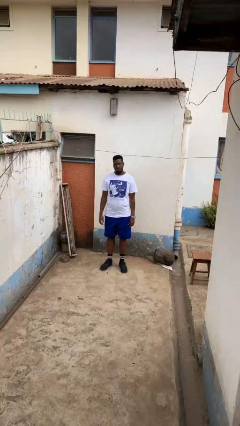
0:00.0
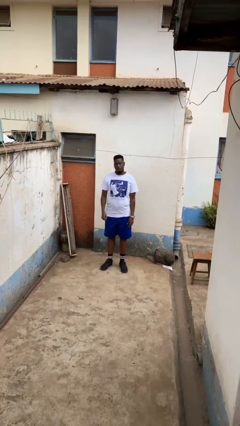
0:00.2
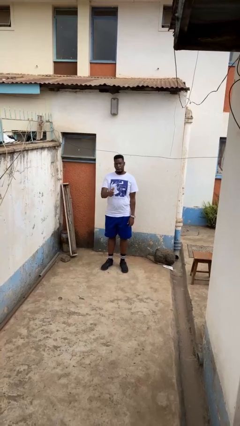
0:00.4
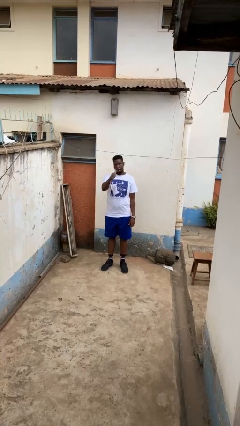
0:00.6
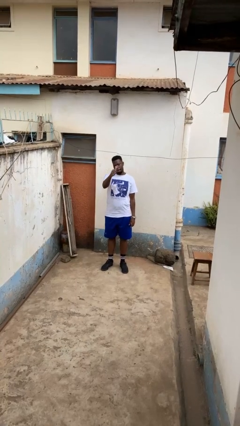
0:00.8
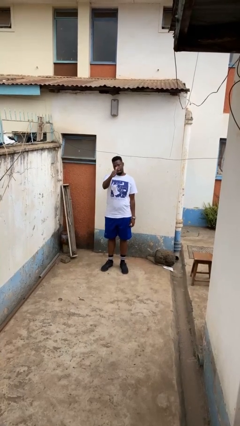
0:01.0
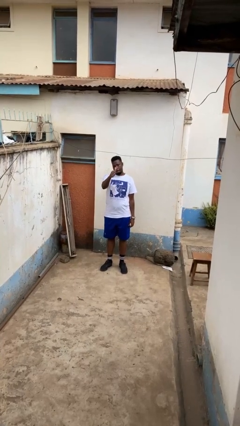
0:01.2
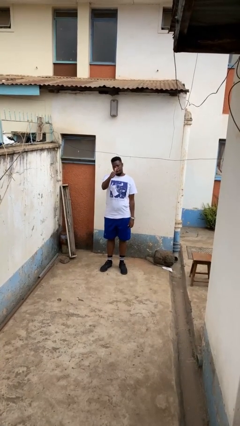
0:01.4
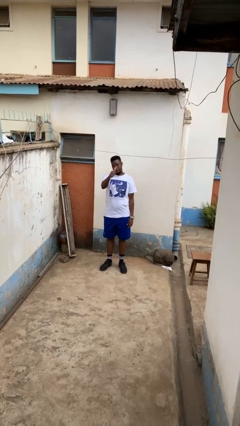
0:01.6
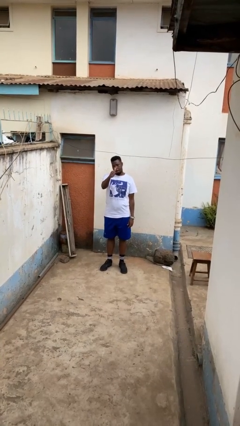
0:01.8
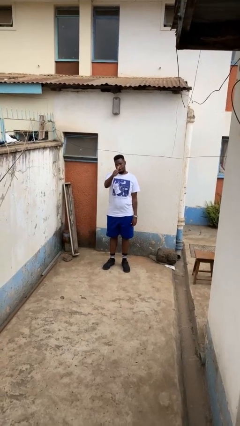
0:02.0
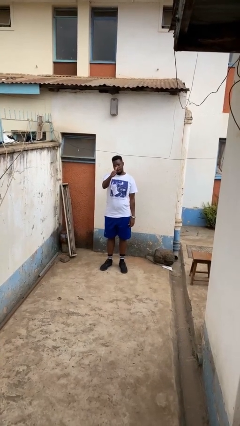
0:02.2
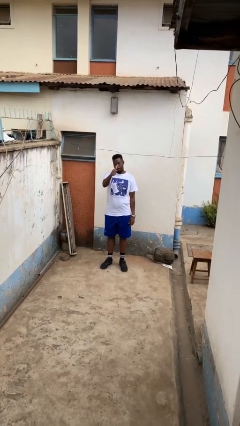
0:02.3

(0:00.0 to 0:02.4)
person gestures thumbs up

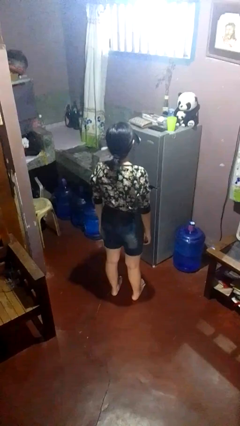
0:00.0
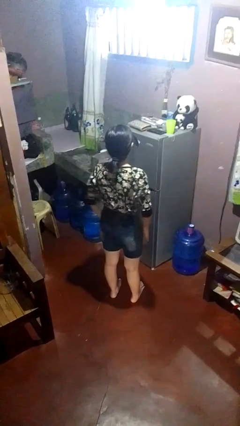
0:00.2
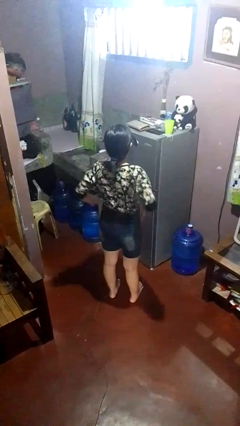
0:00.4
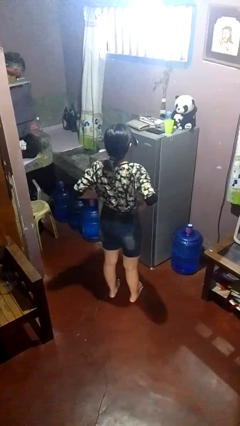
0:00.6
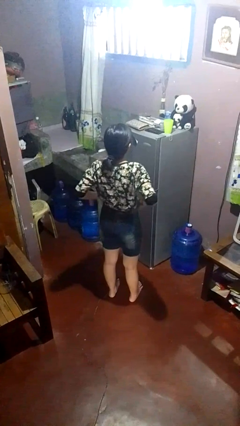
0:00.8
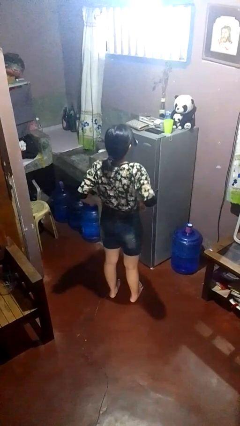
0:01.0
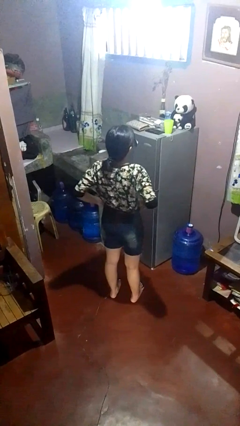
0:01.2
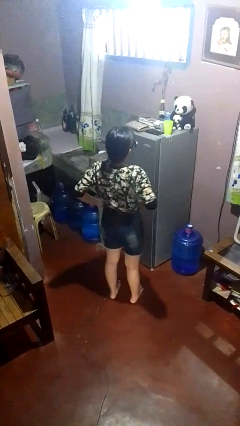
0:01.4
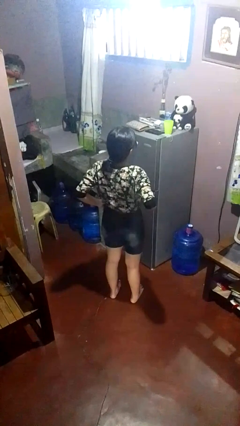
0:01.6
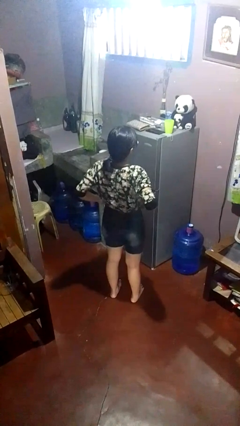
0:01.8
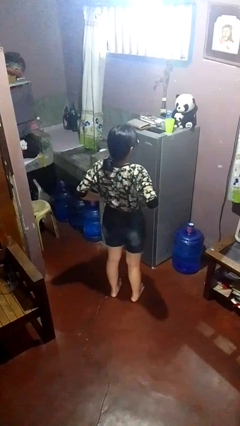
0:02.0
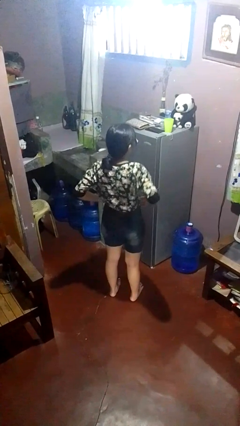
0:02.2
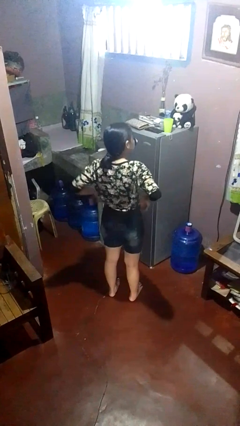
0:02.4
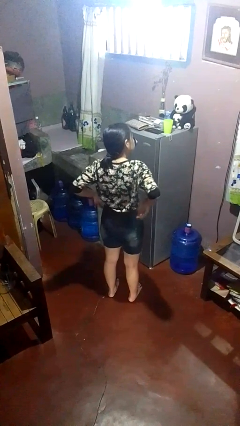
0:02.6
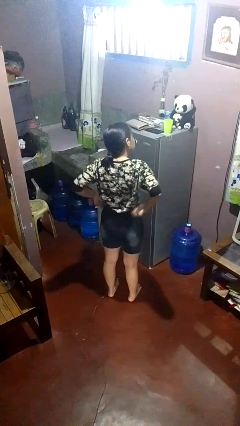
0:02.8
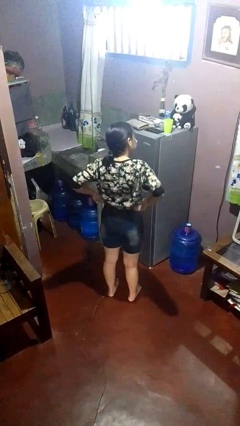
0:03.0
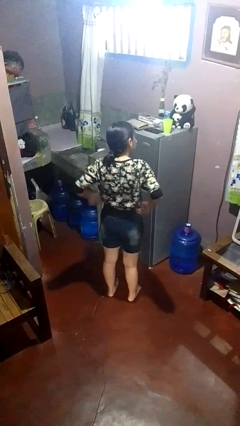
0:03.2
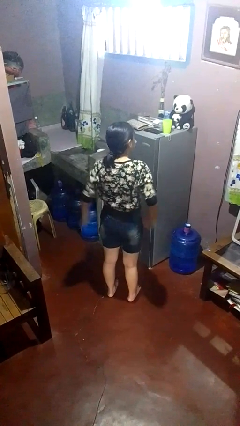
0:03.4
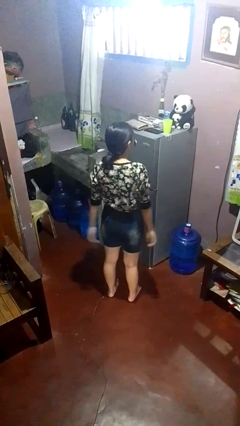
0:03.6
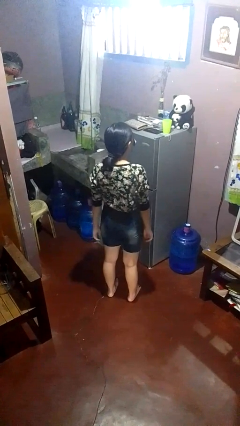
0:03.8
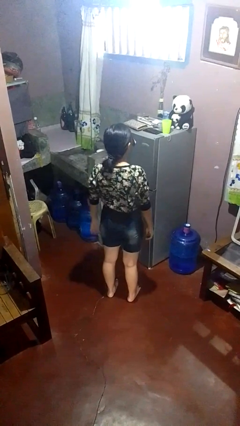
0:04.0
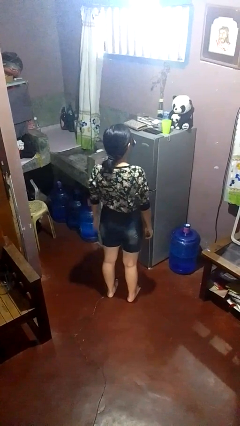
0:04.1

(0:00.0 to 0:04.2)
person hikes up pants

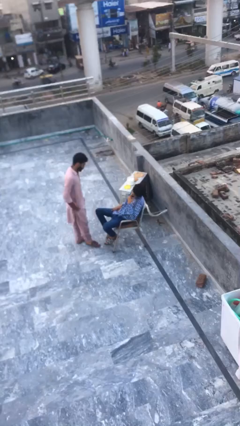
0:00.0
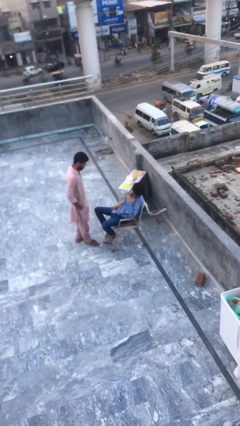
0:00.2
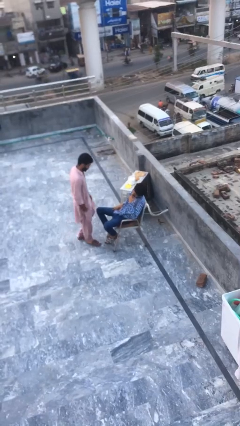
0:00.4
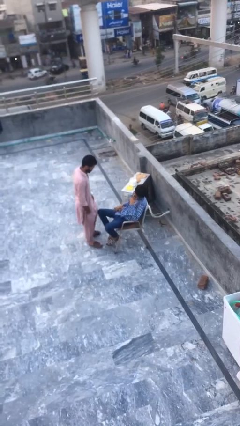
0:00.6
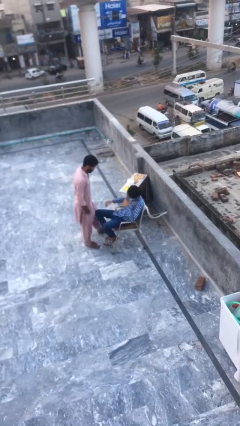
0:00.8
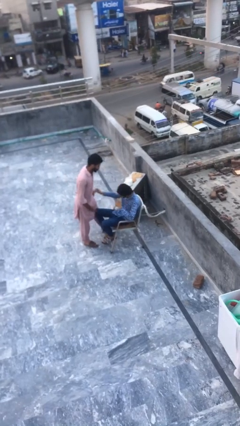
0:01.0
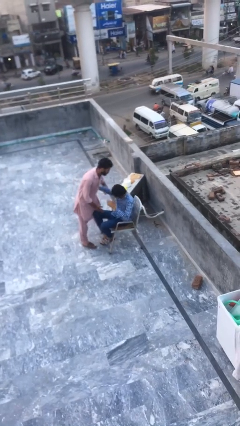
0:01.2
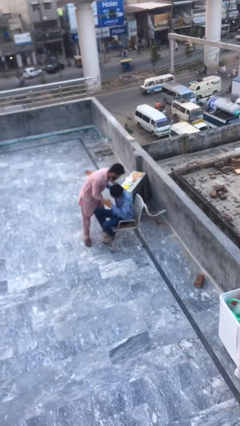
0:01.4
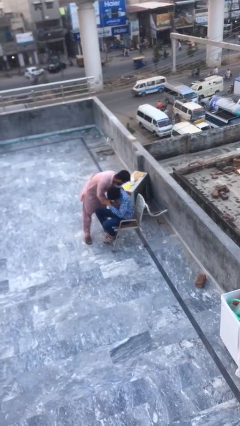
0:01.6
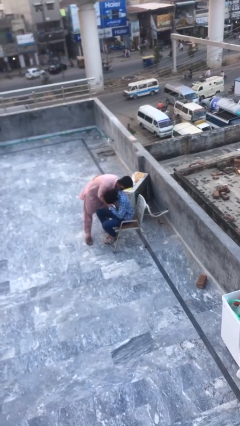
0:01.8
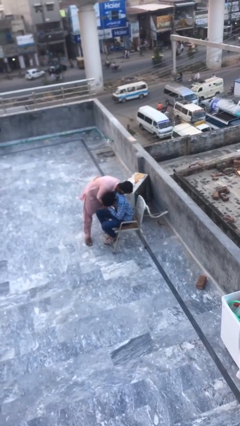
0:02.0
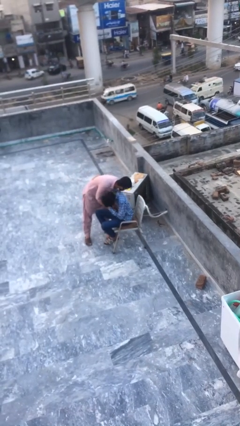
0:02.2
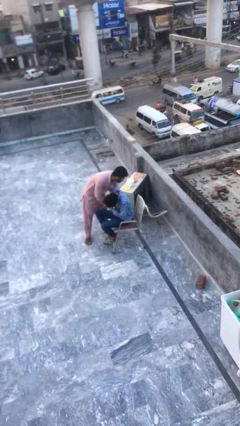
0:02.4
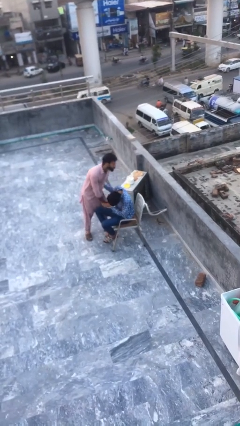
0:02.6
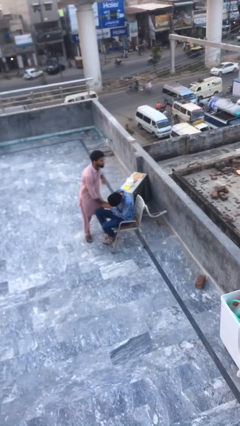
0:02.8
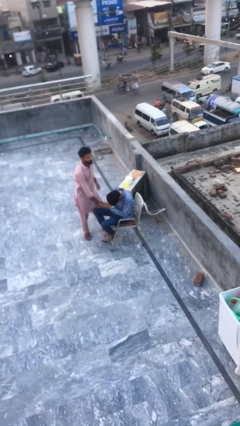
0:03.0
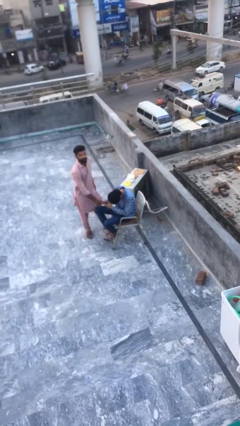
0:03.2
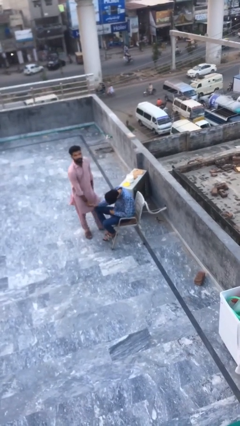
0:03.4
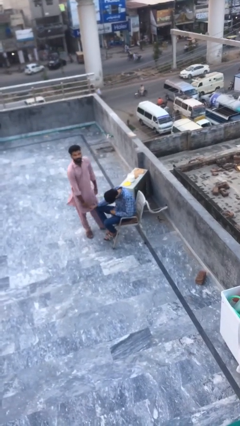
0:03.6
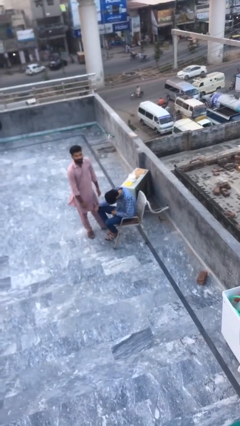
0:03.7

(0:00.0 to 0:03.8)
person embraces person

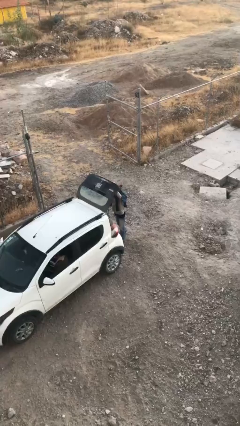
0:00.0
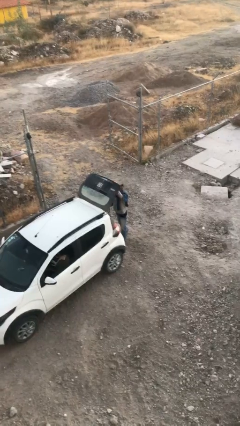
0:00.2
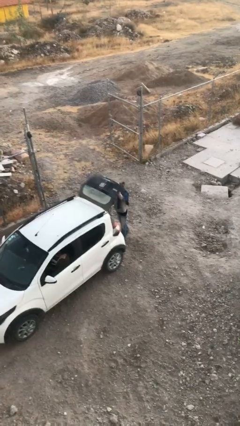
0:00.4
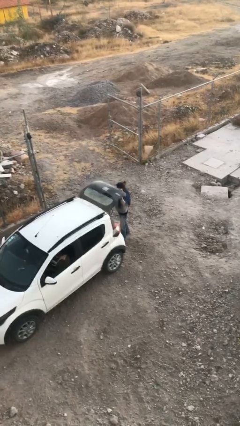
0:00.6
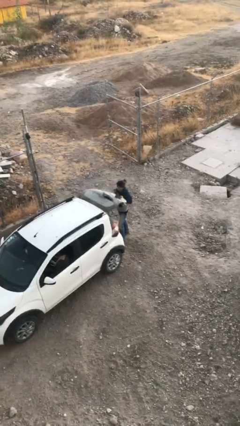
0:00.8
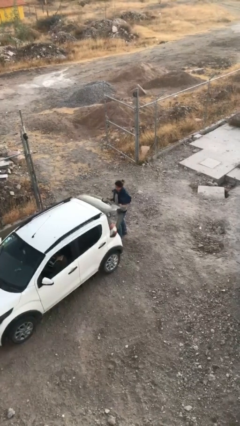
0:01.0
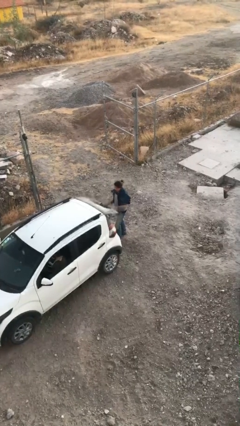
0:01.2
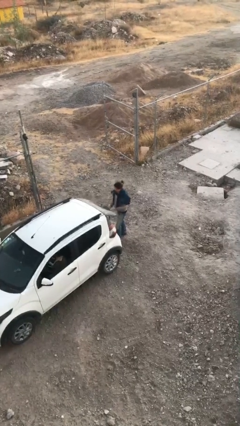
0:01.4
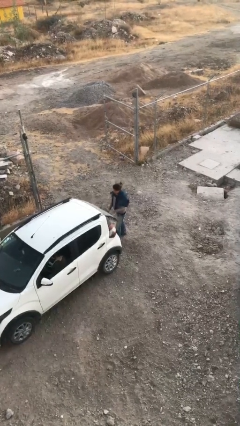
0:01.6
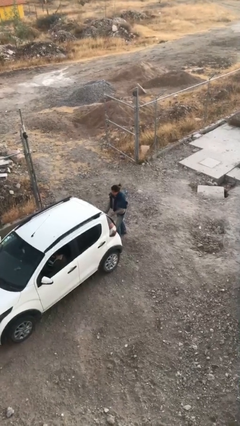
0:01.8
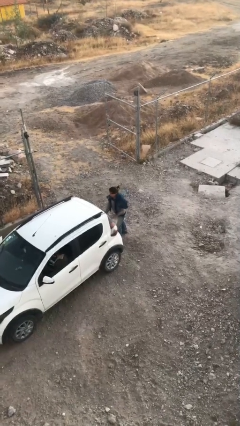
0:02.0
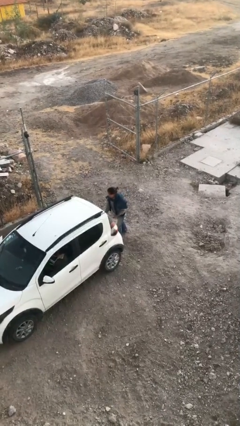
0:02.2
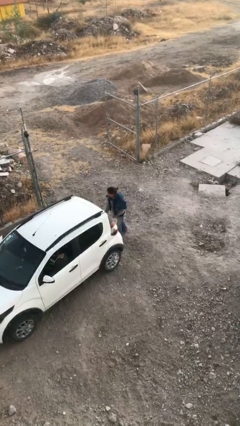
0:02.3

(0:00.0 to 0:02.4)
person closes car trunk

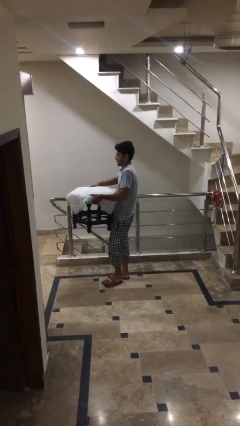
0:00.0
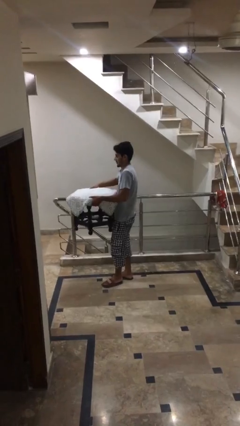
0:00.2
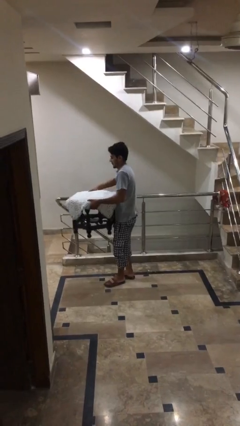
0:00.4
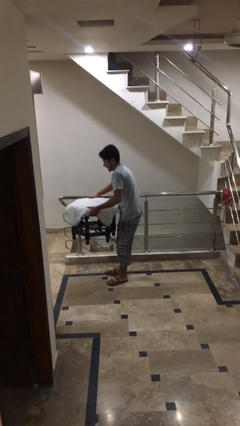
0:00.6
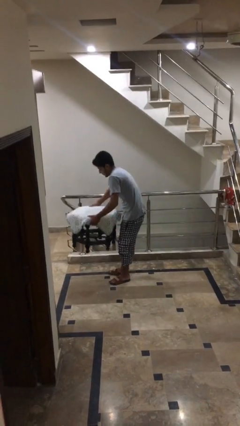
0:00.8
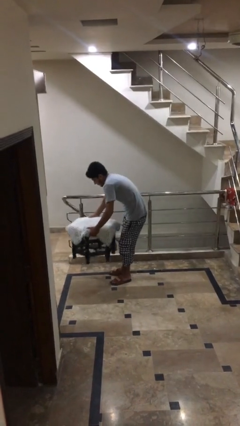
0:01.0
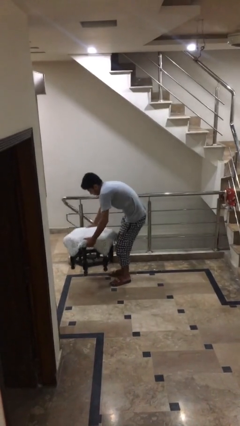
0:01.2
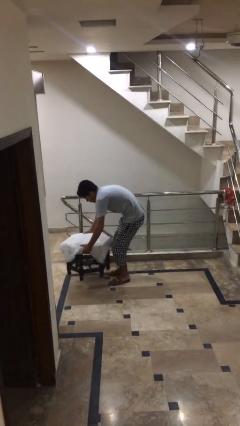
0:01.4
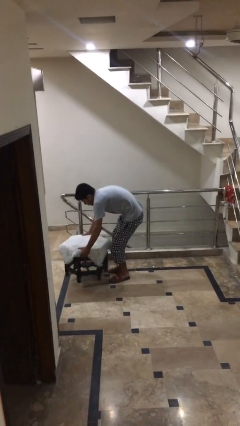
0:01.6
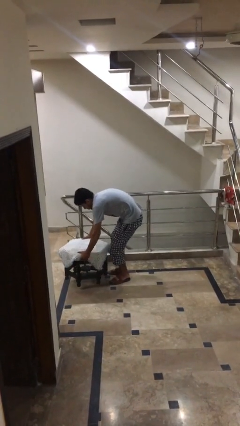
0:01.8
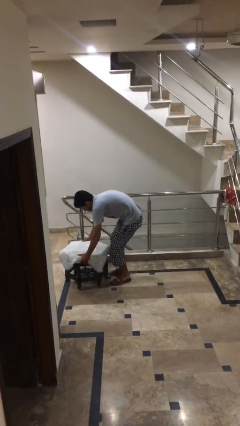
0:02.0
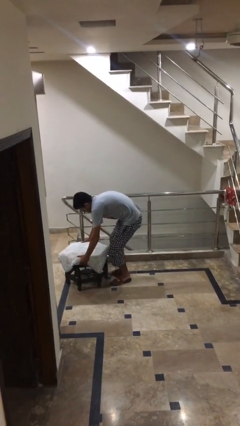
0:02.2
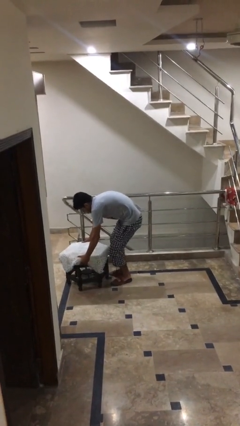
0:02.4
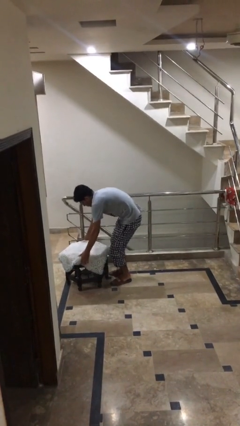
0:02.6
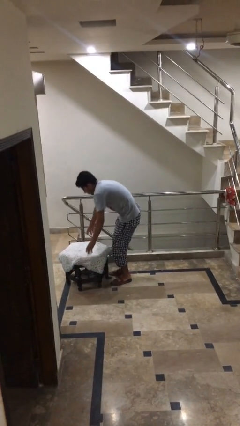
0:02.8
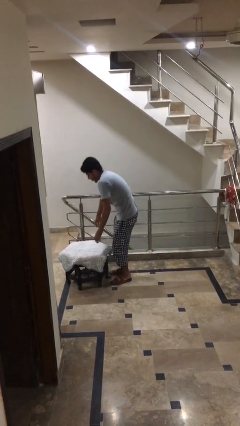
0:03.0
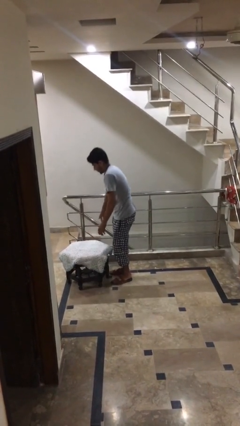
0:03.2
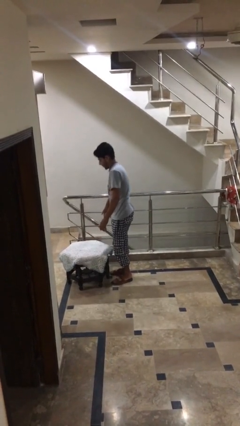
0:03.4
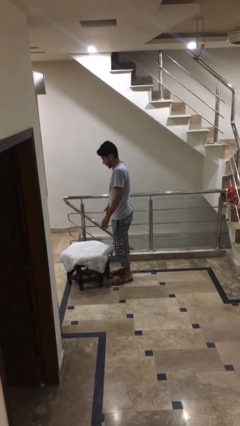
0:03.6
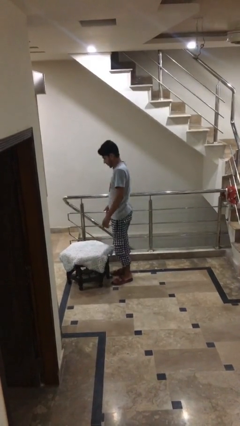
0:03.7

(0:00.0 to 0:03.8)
person puts down object on floor

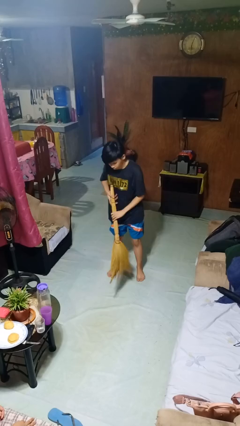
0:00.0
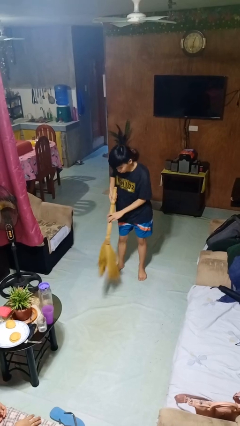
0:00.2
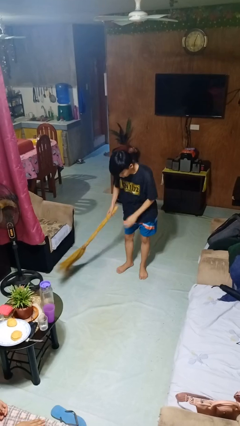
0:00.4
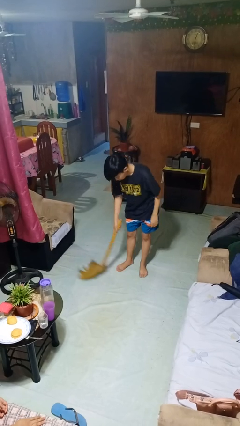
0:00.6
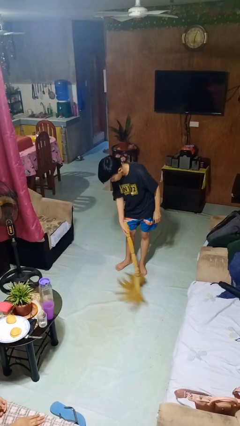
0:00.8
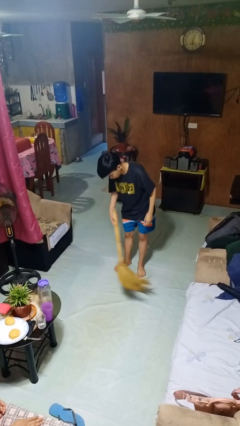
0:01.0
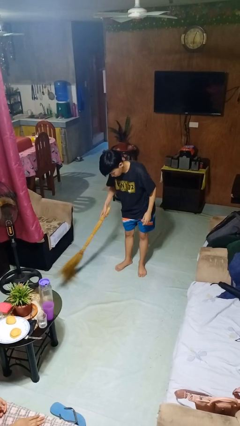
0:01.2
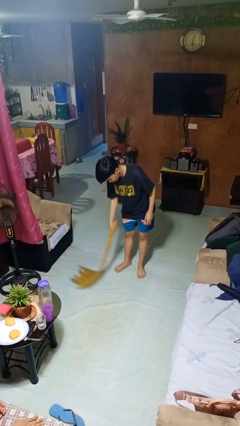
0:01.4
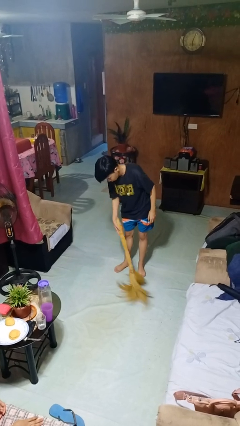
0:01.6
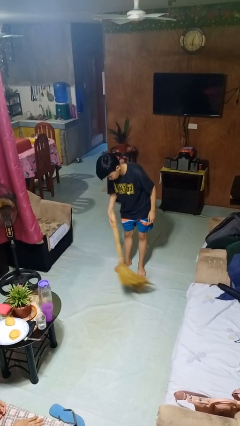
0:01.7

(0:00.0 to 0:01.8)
person sweeps floor
